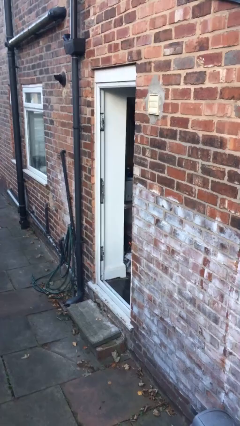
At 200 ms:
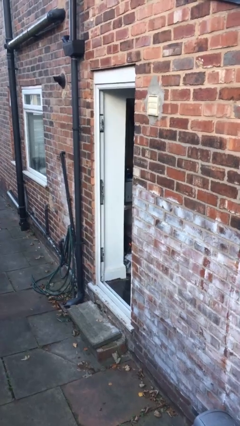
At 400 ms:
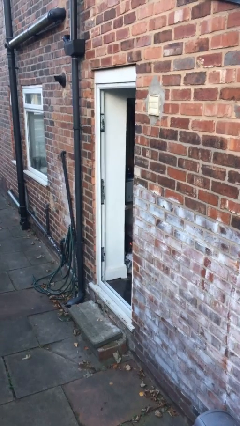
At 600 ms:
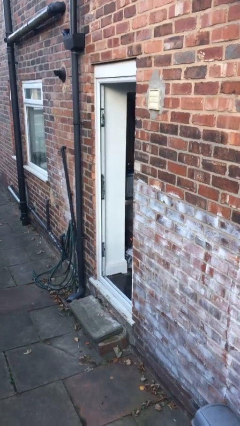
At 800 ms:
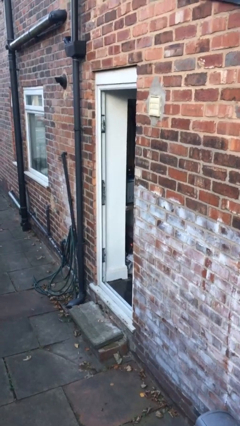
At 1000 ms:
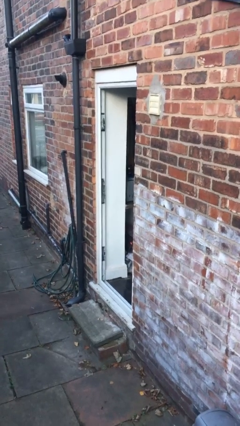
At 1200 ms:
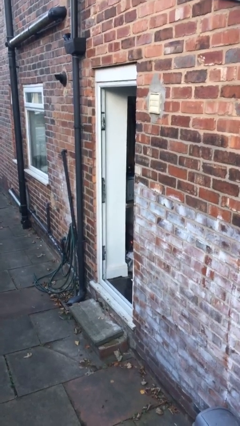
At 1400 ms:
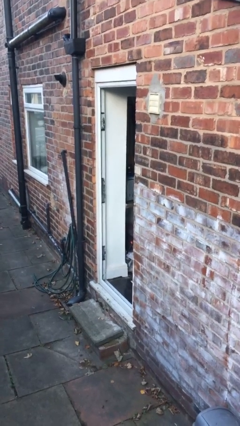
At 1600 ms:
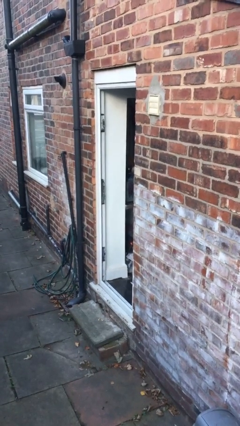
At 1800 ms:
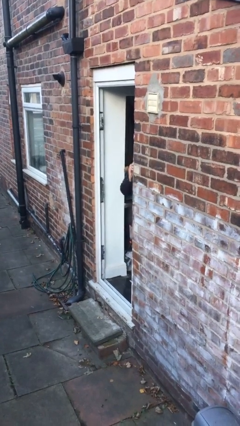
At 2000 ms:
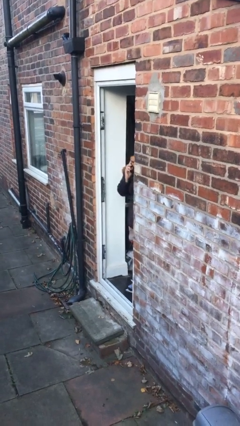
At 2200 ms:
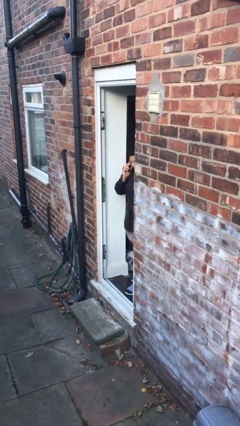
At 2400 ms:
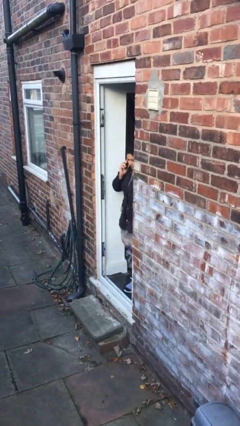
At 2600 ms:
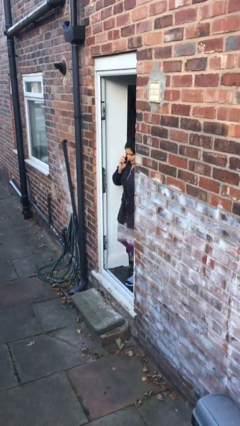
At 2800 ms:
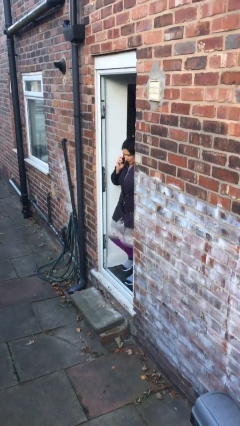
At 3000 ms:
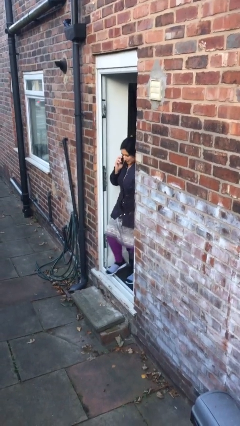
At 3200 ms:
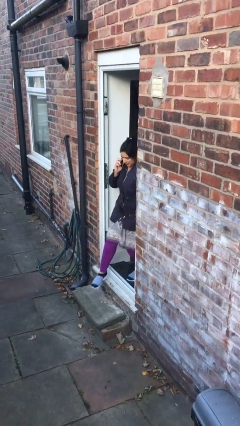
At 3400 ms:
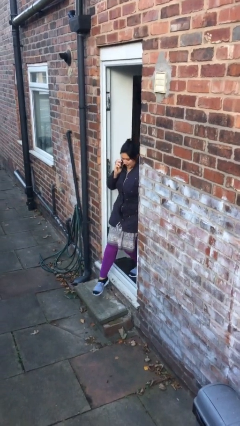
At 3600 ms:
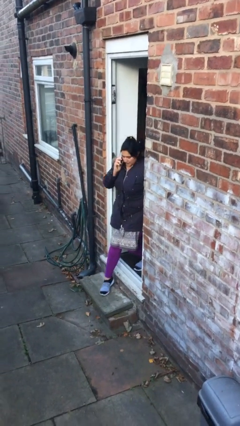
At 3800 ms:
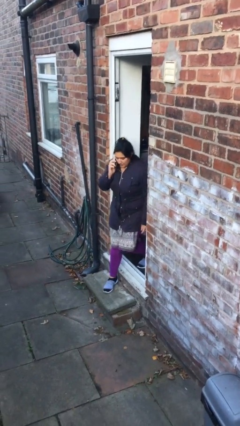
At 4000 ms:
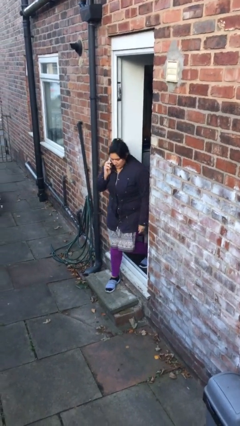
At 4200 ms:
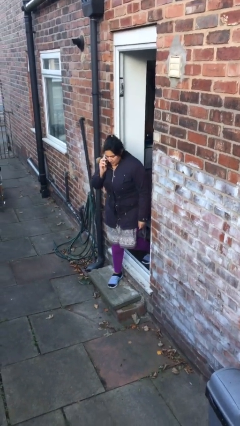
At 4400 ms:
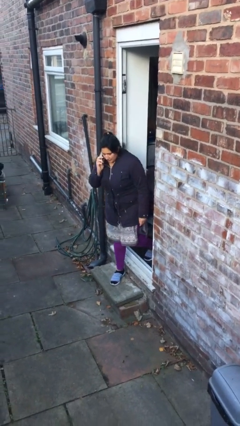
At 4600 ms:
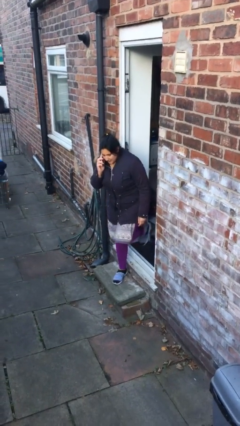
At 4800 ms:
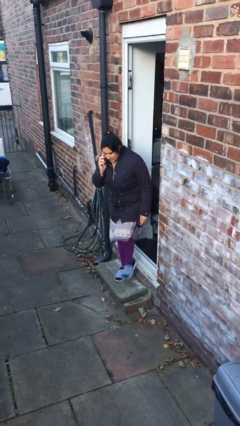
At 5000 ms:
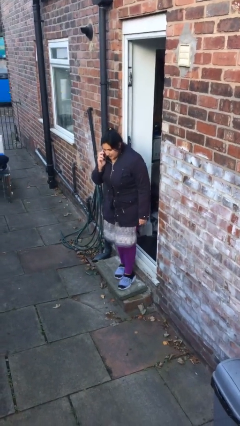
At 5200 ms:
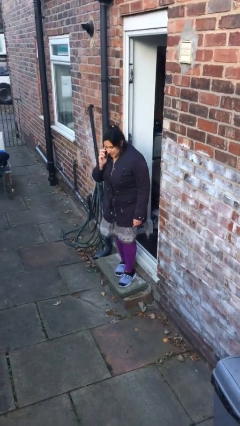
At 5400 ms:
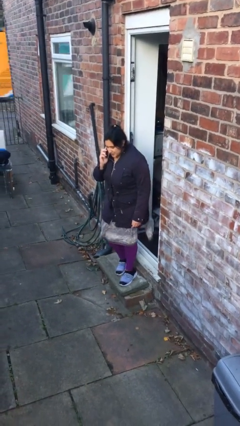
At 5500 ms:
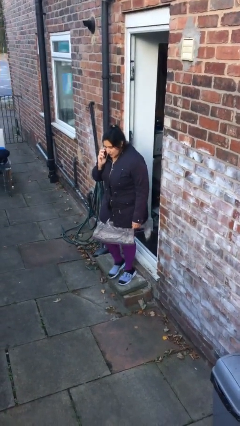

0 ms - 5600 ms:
person enters scene through structure

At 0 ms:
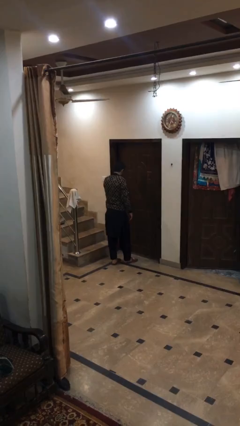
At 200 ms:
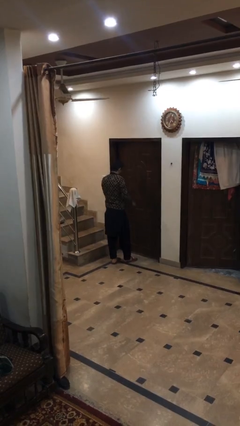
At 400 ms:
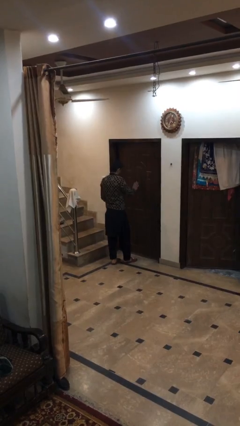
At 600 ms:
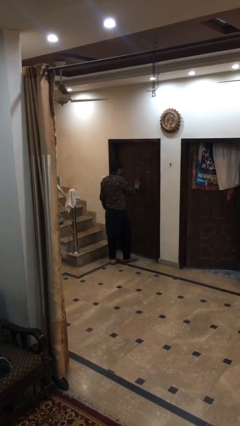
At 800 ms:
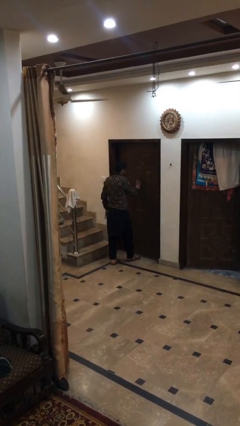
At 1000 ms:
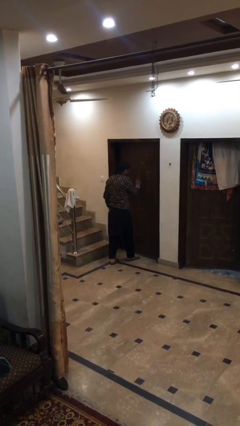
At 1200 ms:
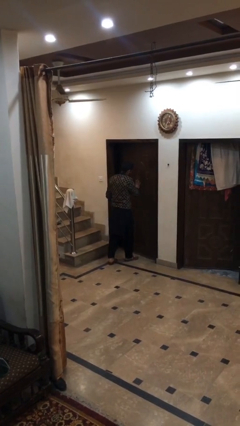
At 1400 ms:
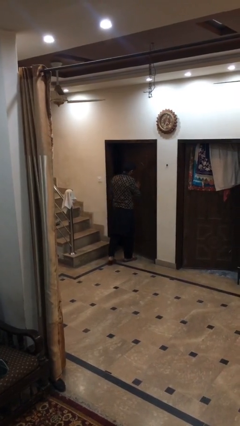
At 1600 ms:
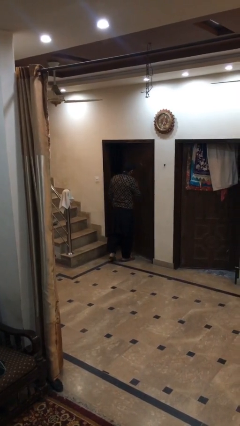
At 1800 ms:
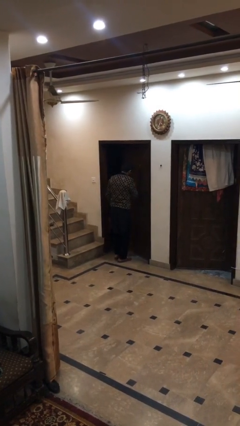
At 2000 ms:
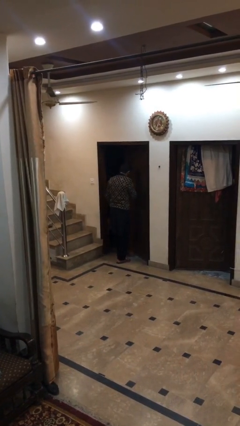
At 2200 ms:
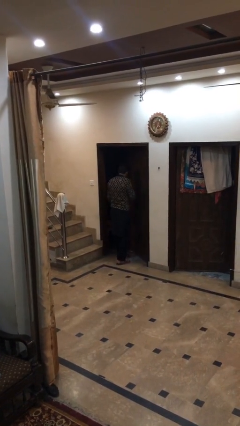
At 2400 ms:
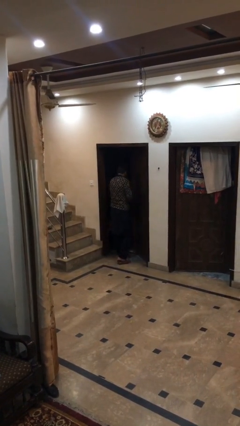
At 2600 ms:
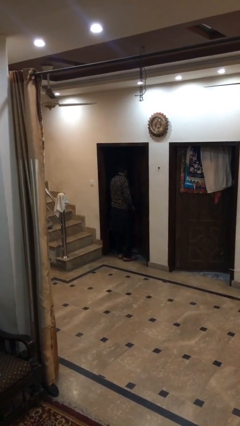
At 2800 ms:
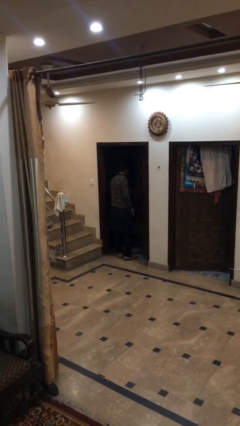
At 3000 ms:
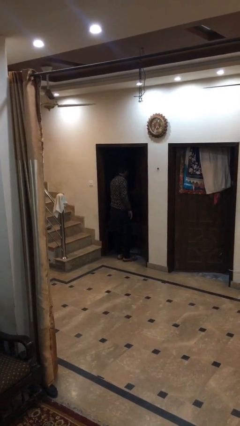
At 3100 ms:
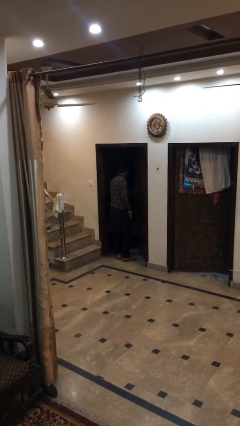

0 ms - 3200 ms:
person opens facility door

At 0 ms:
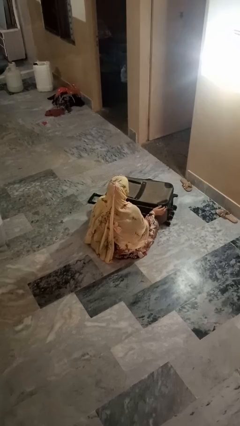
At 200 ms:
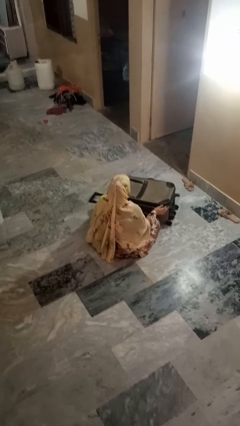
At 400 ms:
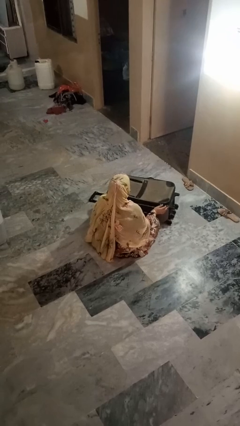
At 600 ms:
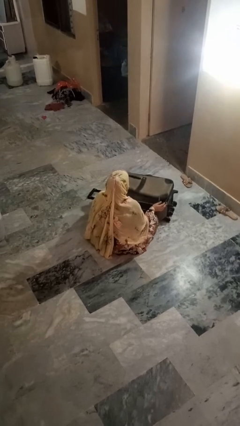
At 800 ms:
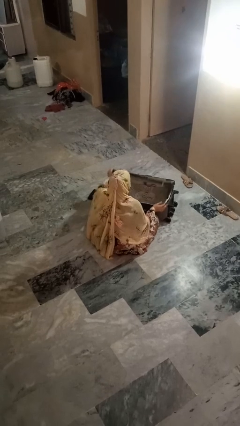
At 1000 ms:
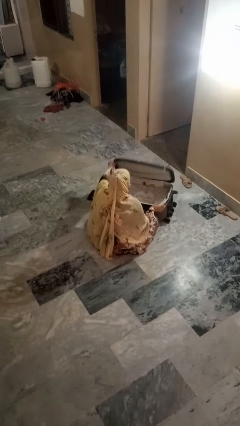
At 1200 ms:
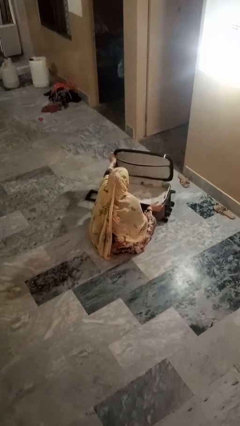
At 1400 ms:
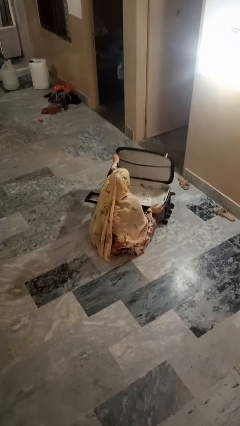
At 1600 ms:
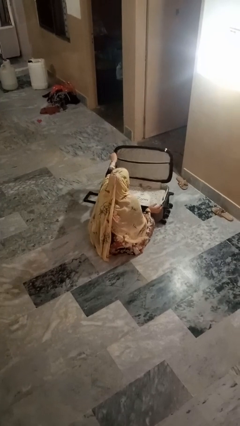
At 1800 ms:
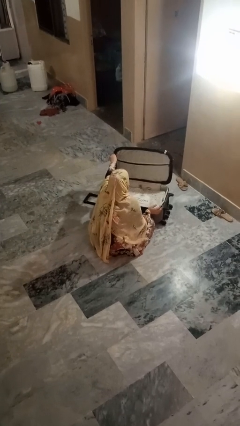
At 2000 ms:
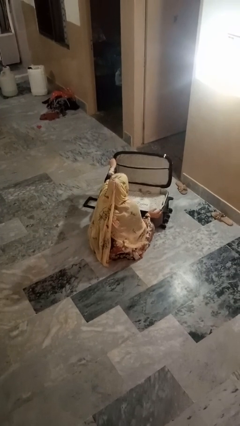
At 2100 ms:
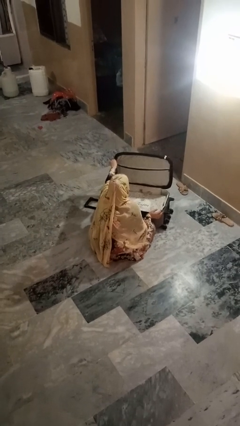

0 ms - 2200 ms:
person opens suitcase

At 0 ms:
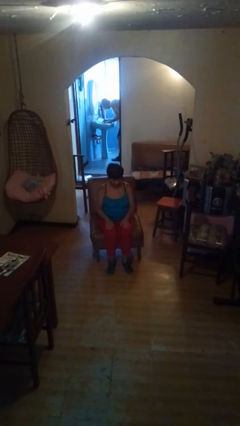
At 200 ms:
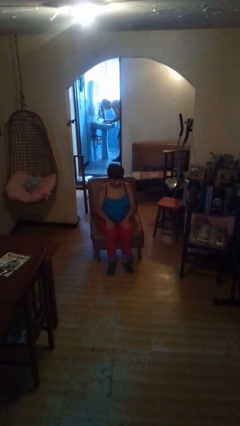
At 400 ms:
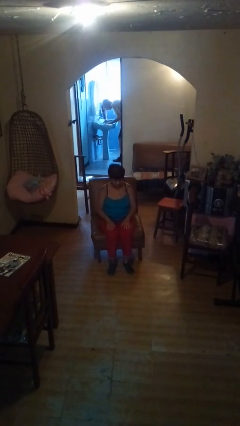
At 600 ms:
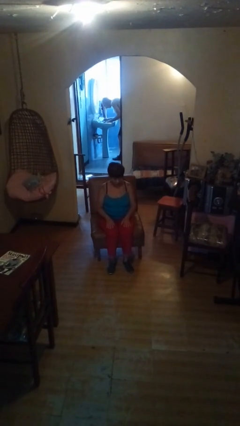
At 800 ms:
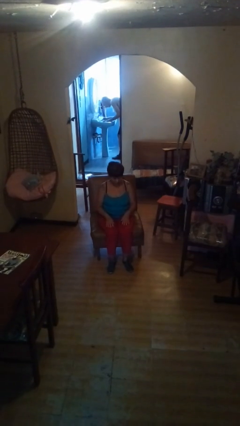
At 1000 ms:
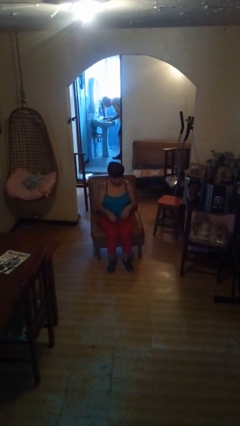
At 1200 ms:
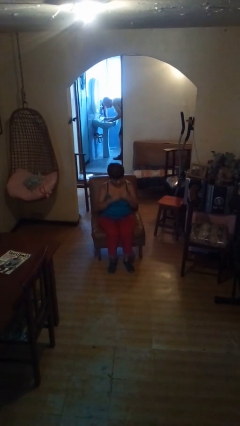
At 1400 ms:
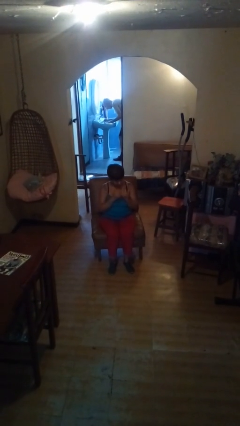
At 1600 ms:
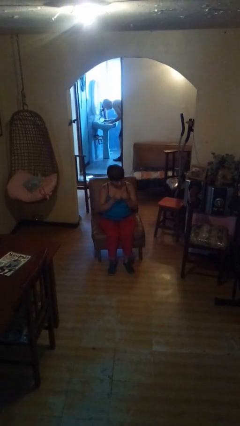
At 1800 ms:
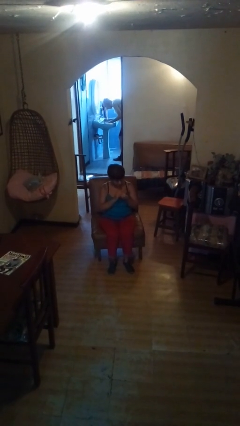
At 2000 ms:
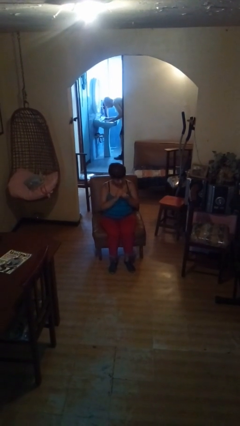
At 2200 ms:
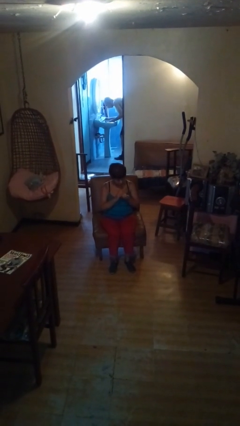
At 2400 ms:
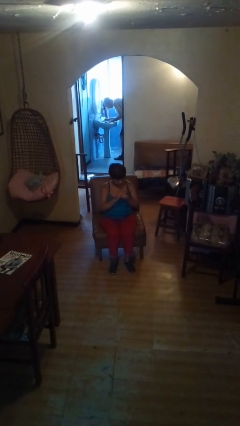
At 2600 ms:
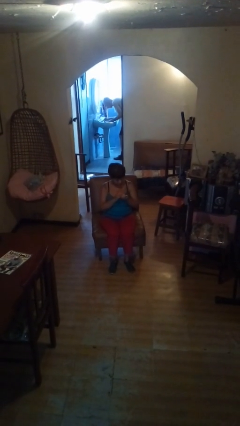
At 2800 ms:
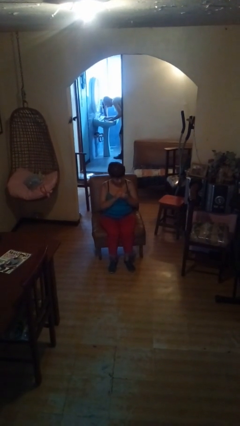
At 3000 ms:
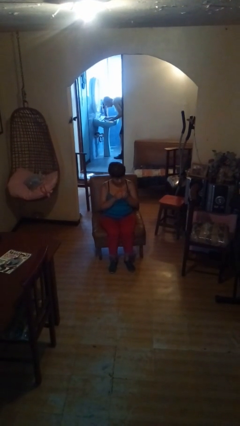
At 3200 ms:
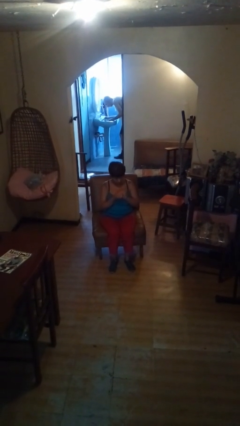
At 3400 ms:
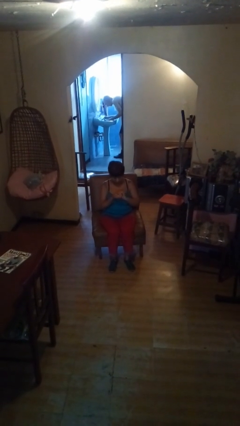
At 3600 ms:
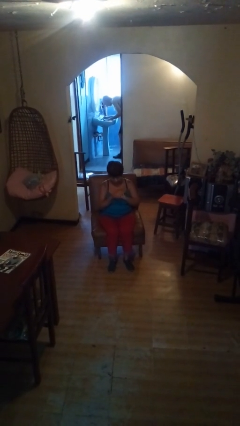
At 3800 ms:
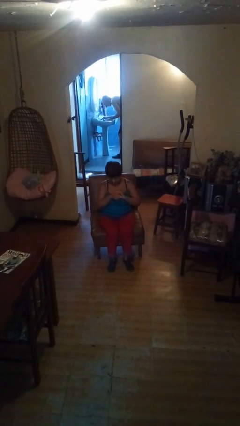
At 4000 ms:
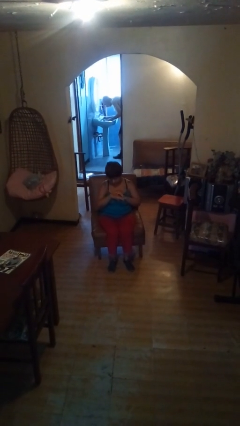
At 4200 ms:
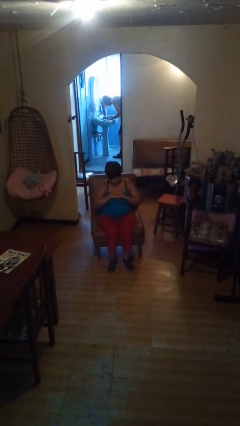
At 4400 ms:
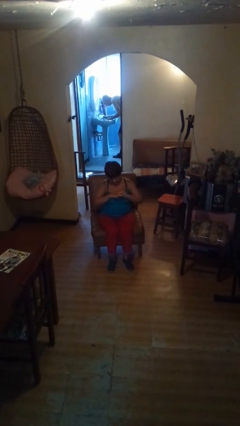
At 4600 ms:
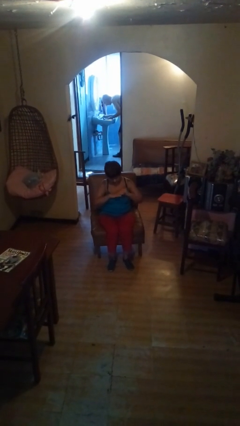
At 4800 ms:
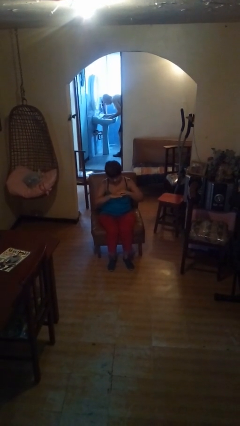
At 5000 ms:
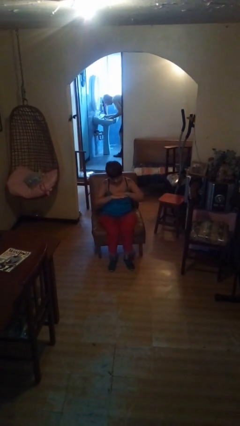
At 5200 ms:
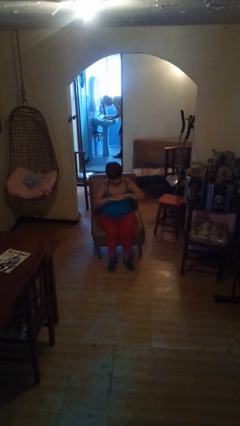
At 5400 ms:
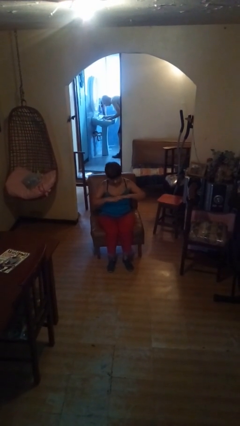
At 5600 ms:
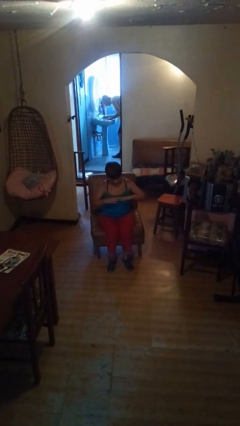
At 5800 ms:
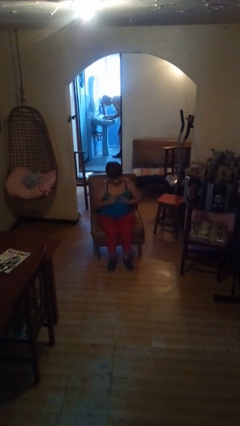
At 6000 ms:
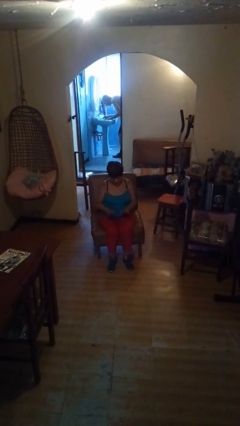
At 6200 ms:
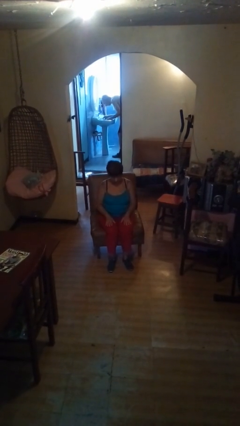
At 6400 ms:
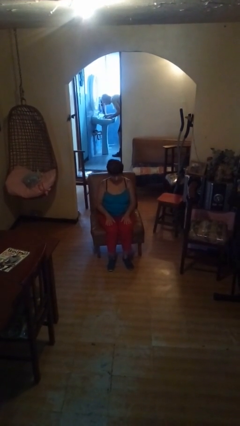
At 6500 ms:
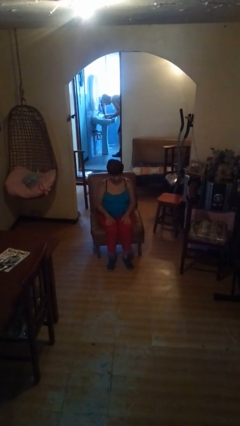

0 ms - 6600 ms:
person looks at hands in lap
